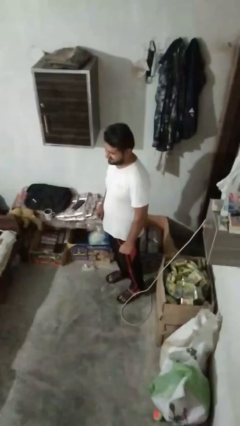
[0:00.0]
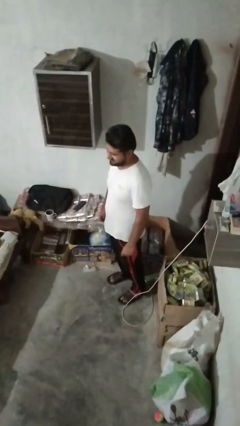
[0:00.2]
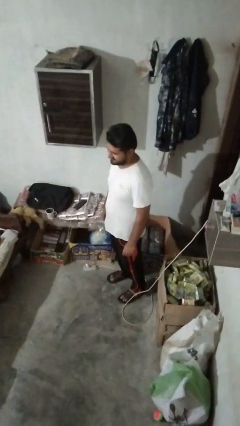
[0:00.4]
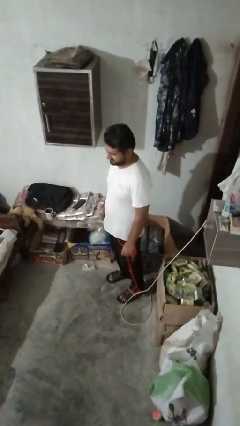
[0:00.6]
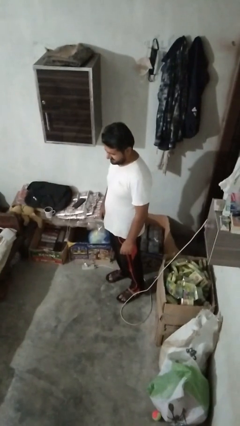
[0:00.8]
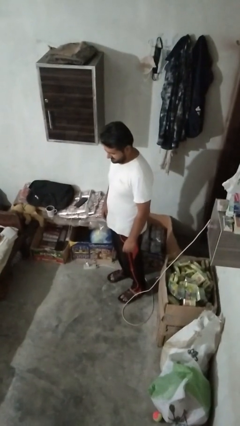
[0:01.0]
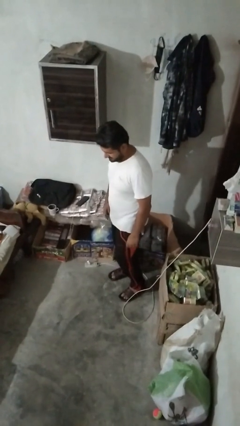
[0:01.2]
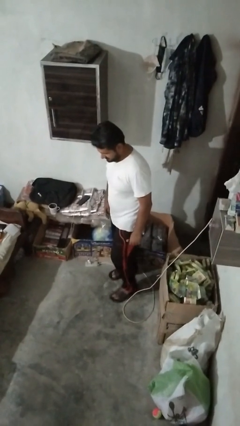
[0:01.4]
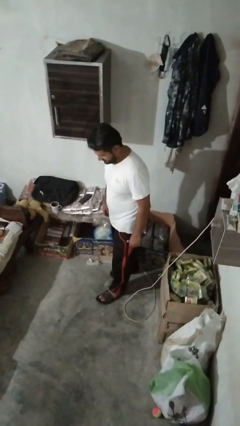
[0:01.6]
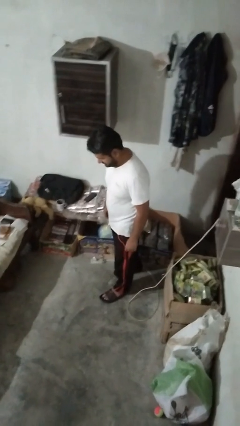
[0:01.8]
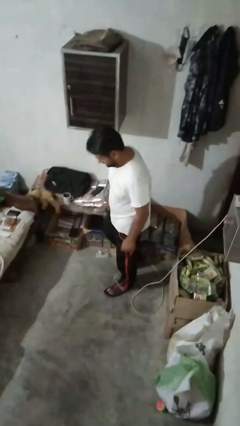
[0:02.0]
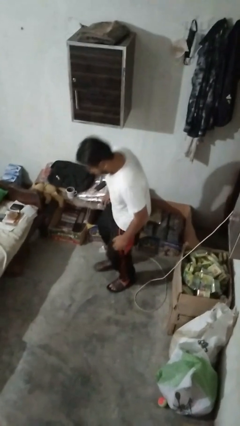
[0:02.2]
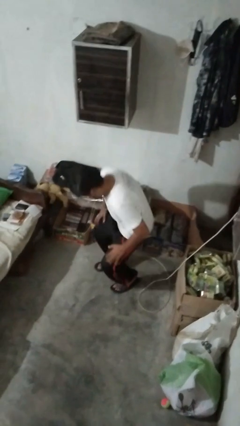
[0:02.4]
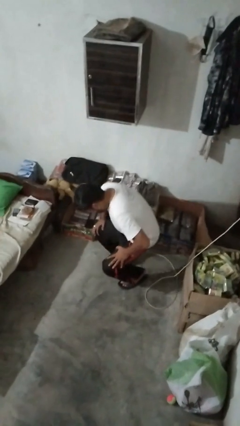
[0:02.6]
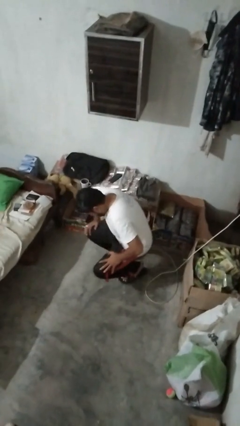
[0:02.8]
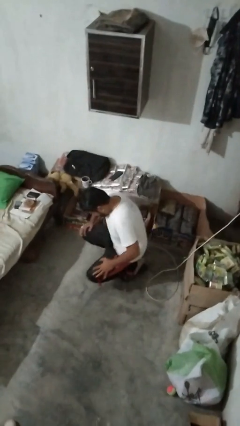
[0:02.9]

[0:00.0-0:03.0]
person trips on object on floor

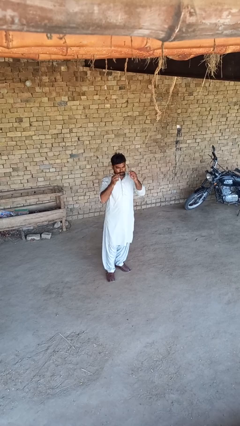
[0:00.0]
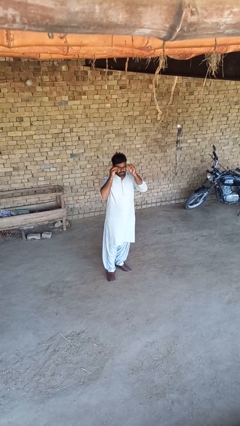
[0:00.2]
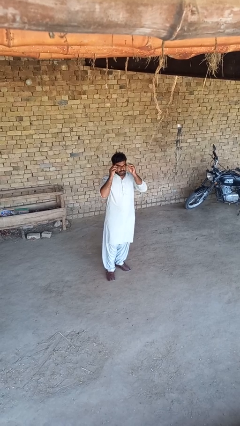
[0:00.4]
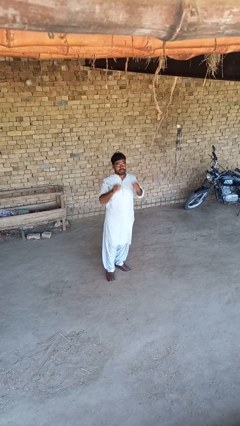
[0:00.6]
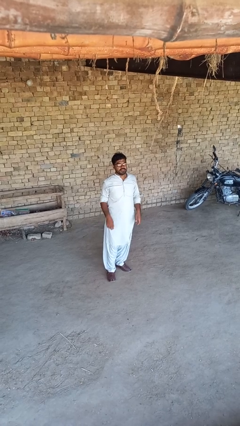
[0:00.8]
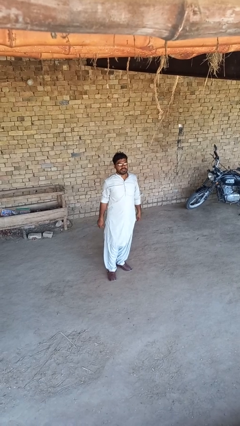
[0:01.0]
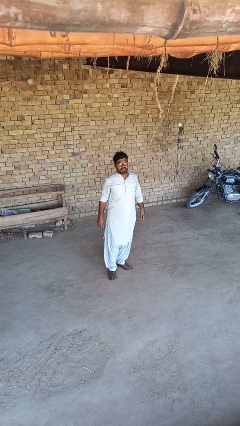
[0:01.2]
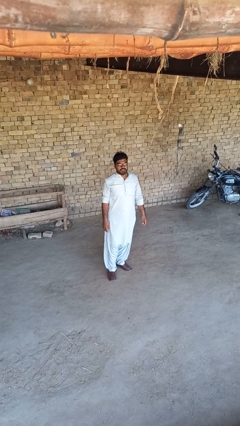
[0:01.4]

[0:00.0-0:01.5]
person puts on glasses

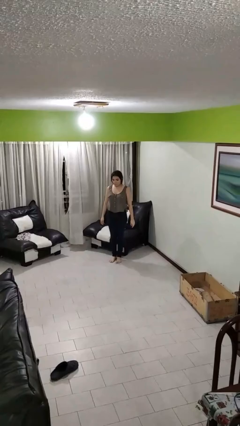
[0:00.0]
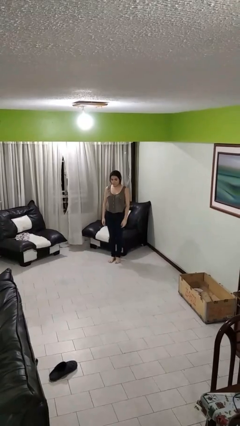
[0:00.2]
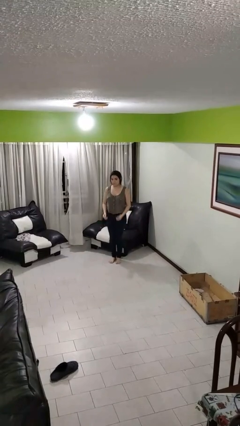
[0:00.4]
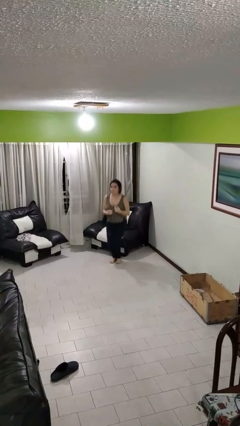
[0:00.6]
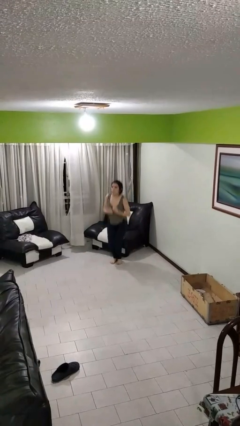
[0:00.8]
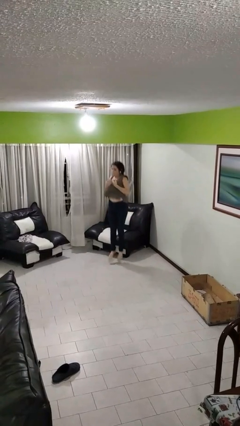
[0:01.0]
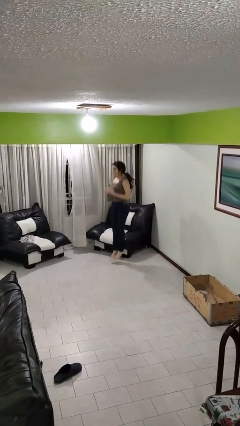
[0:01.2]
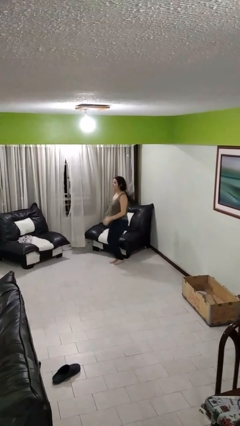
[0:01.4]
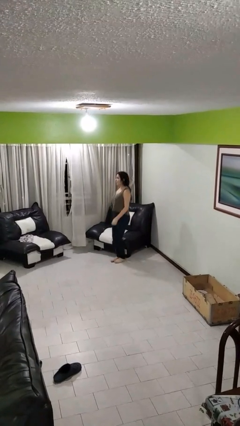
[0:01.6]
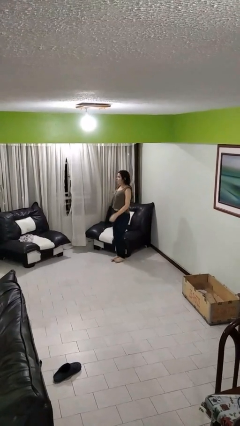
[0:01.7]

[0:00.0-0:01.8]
person jumps

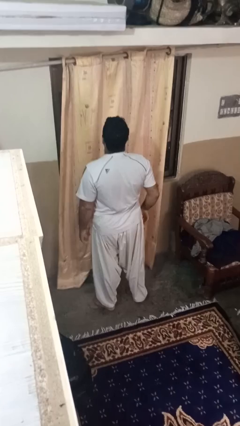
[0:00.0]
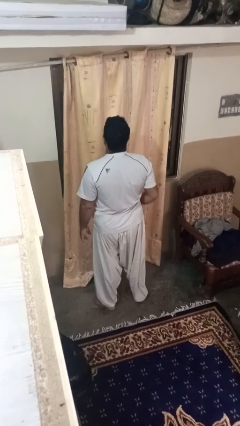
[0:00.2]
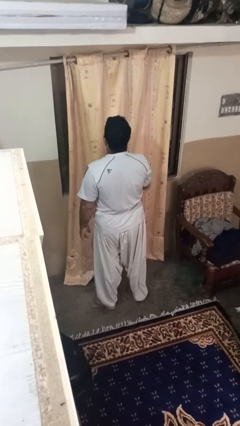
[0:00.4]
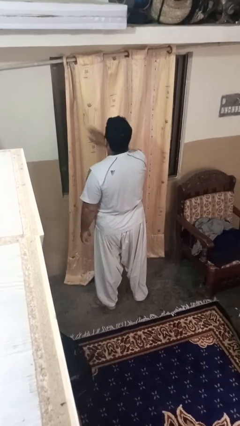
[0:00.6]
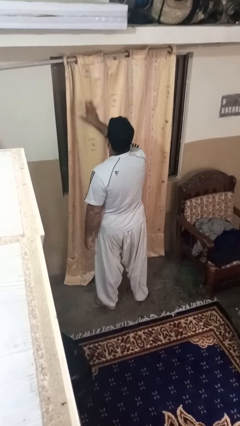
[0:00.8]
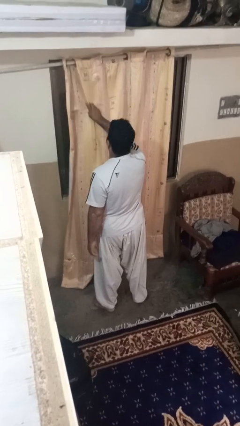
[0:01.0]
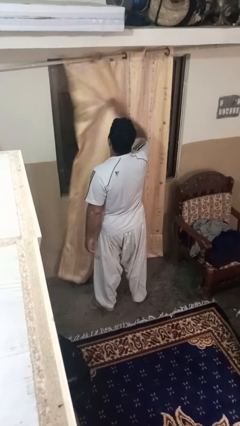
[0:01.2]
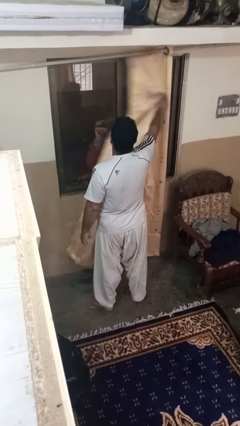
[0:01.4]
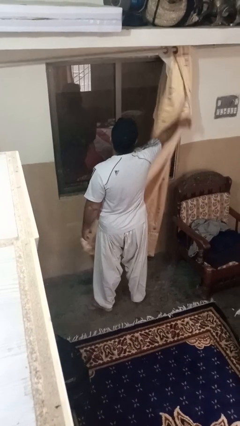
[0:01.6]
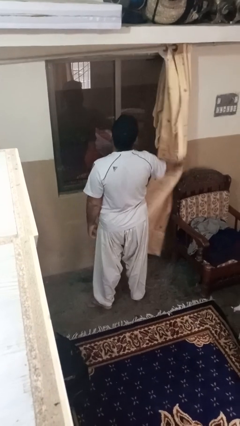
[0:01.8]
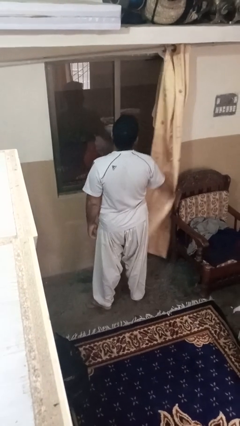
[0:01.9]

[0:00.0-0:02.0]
person opens curtains

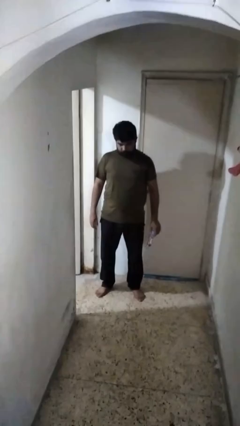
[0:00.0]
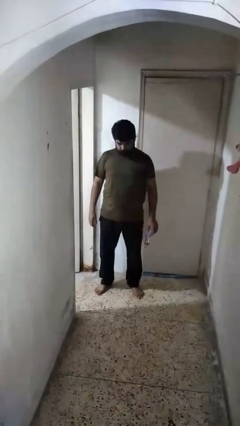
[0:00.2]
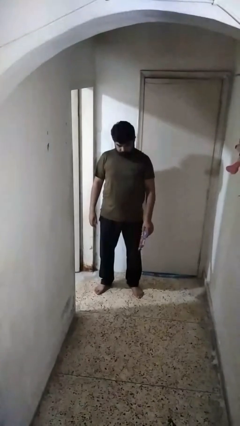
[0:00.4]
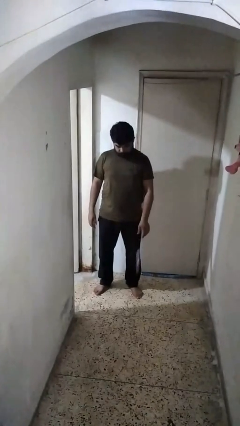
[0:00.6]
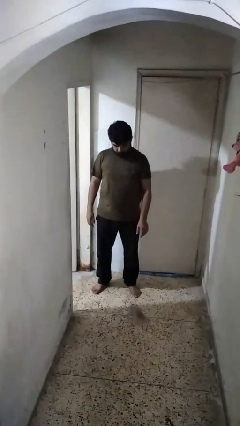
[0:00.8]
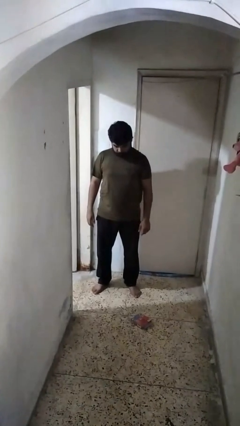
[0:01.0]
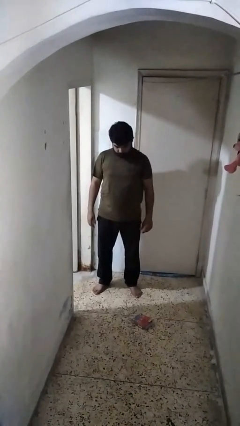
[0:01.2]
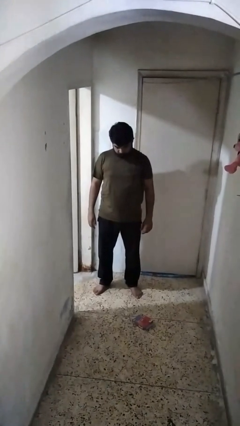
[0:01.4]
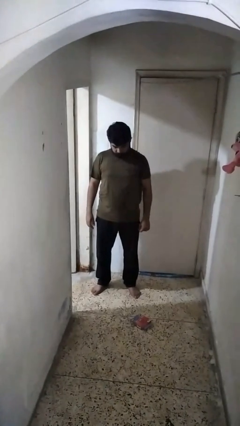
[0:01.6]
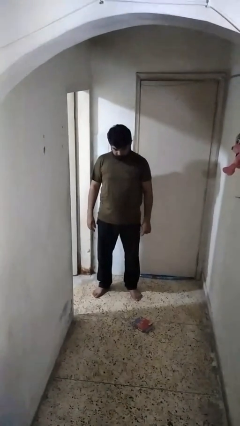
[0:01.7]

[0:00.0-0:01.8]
person throws object to ground

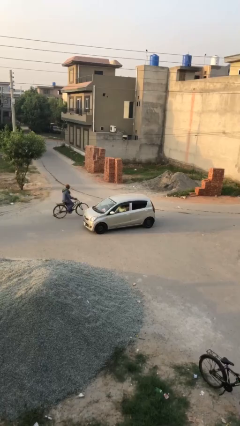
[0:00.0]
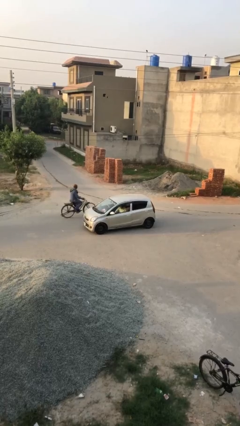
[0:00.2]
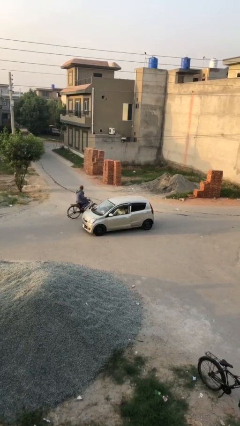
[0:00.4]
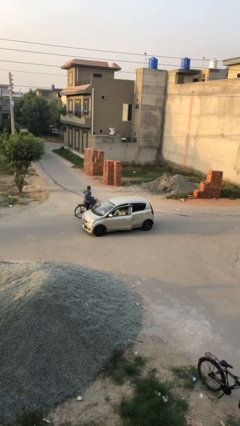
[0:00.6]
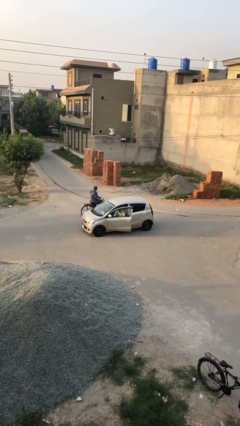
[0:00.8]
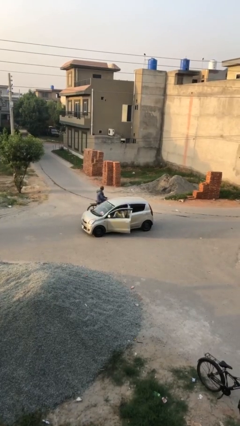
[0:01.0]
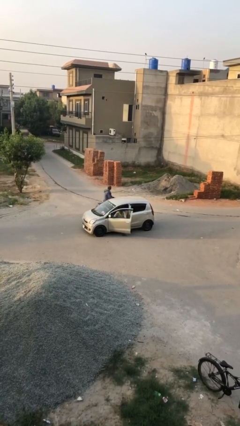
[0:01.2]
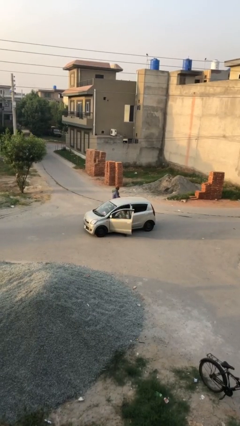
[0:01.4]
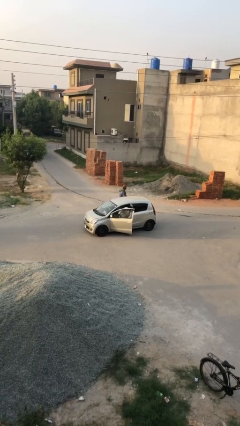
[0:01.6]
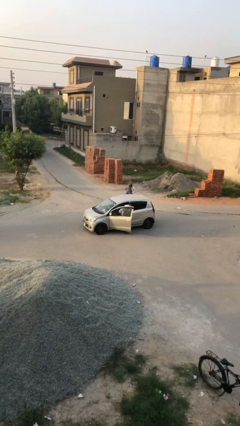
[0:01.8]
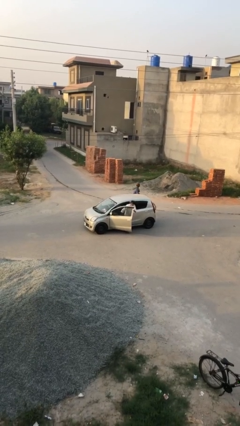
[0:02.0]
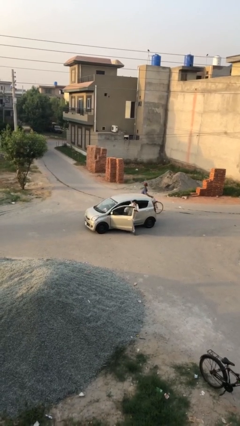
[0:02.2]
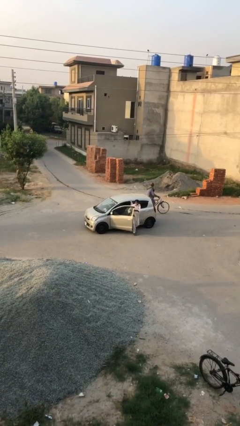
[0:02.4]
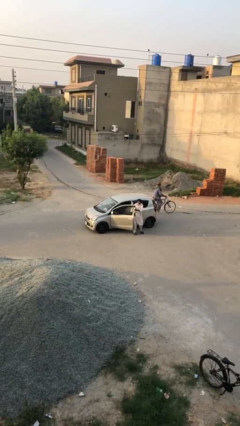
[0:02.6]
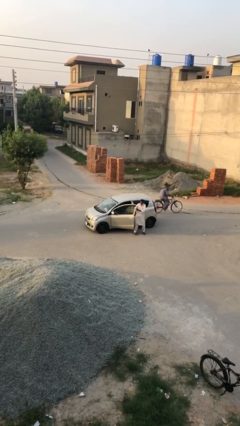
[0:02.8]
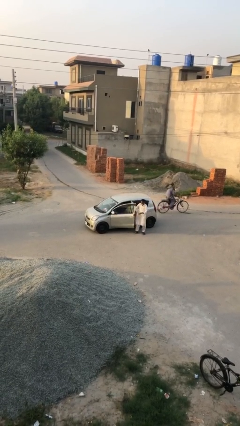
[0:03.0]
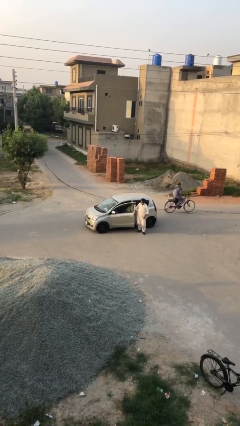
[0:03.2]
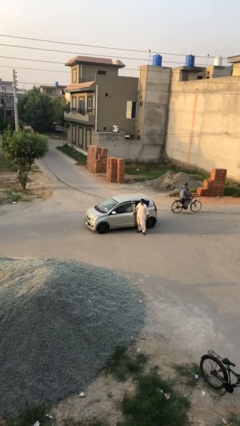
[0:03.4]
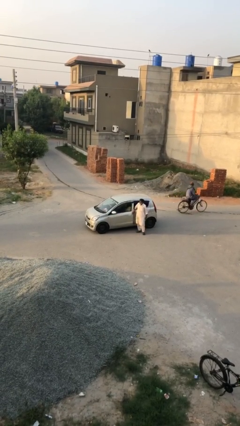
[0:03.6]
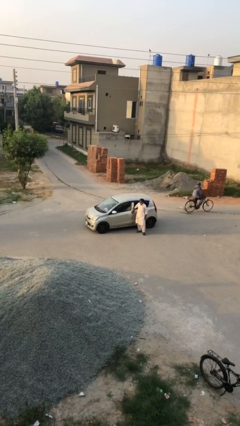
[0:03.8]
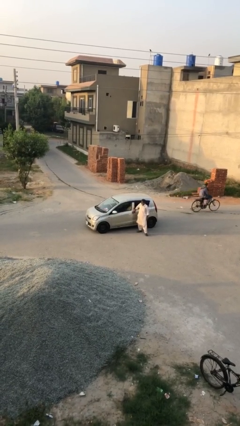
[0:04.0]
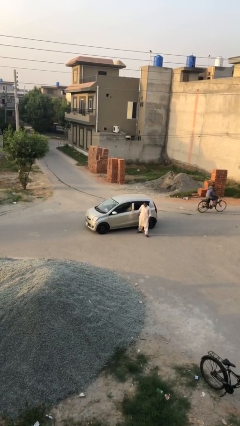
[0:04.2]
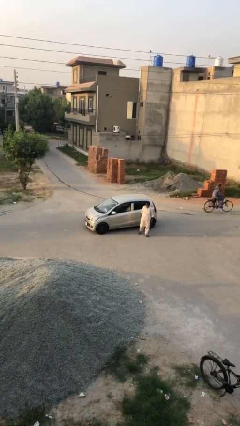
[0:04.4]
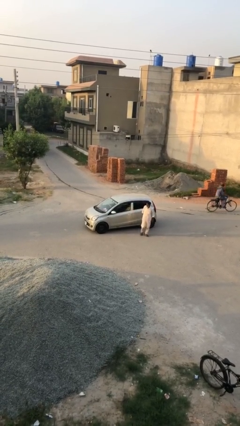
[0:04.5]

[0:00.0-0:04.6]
car drops off person

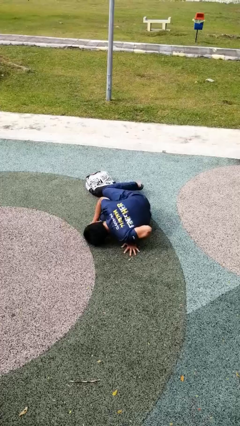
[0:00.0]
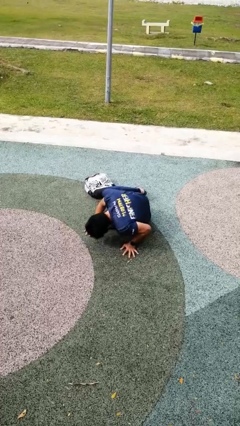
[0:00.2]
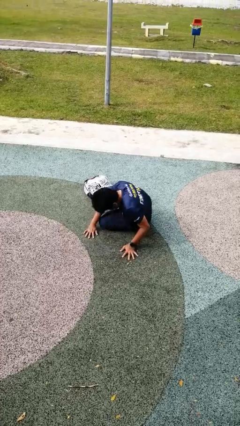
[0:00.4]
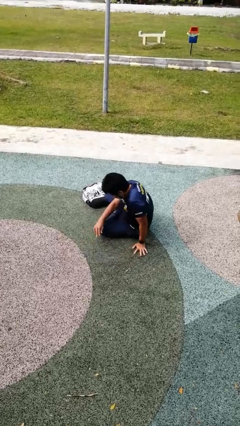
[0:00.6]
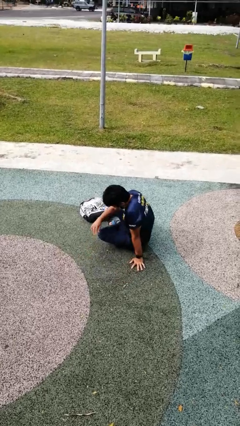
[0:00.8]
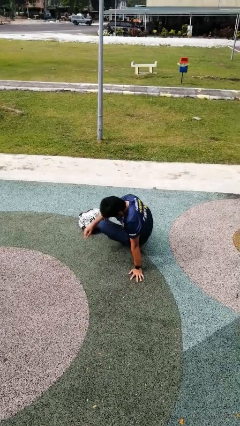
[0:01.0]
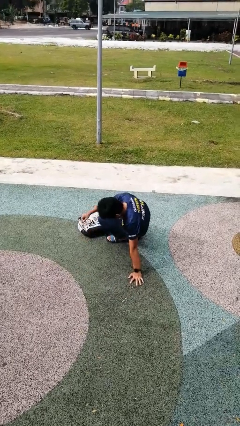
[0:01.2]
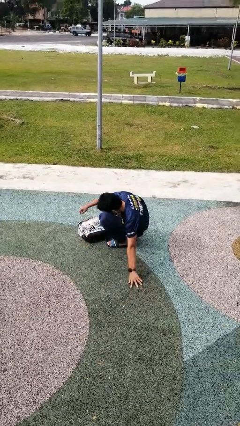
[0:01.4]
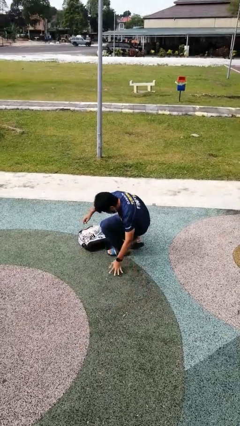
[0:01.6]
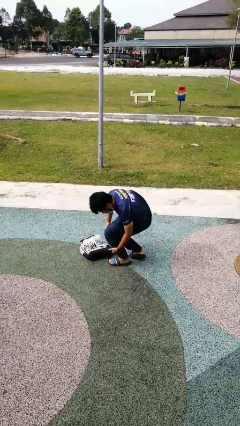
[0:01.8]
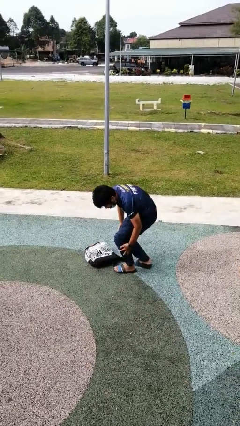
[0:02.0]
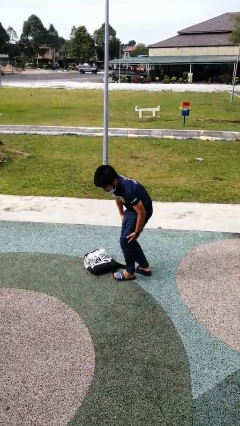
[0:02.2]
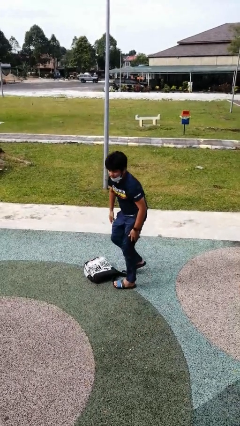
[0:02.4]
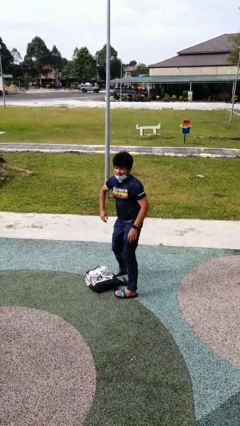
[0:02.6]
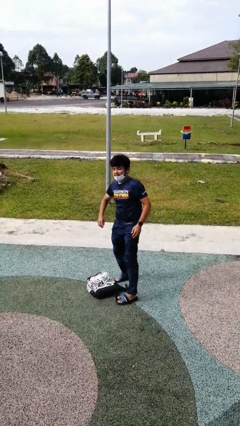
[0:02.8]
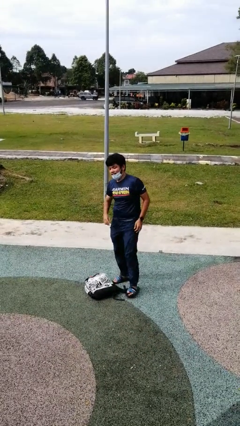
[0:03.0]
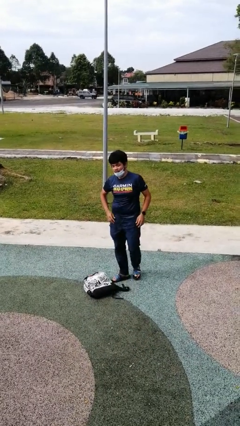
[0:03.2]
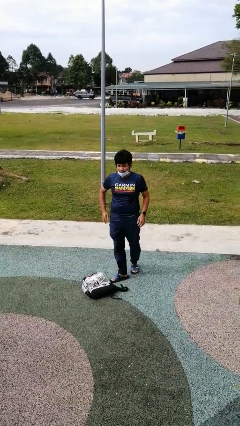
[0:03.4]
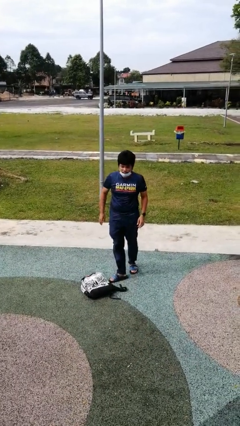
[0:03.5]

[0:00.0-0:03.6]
person stands up from floor
